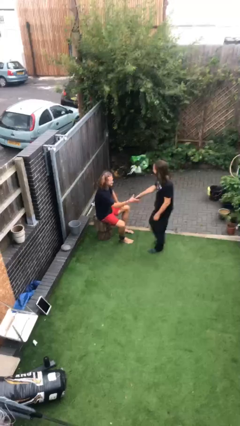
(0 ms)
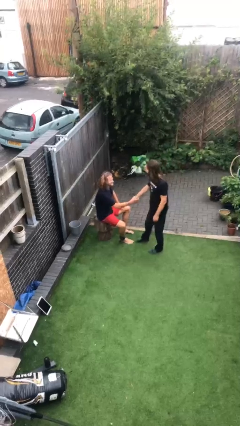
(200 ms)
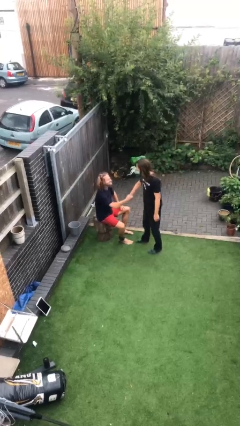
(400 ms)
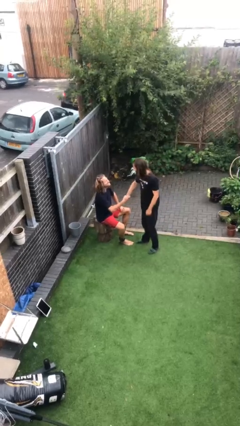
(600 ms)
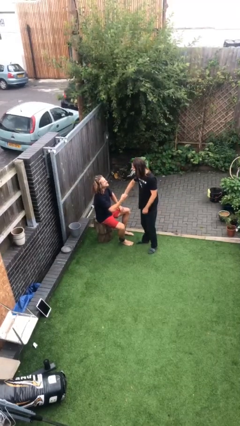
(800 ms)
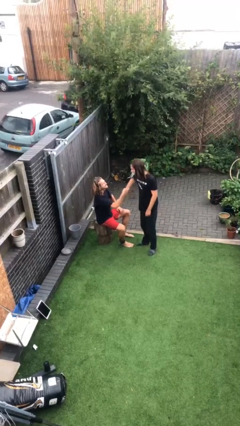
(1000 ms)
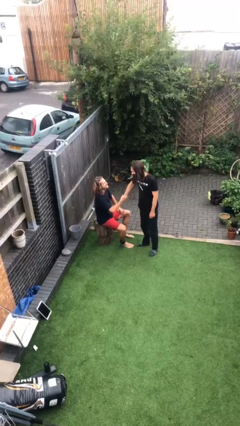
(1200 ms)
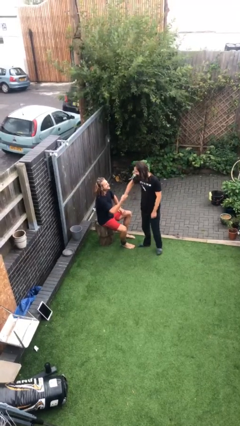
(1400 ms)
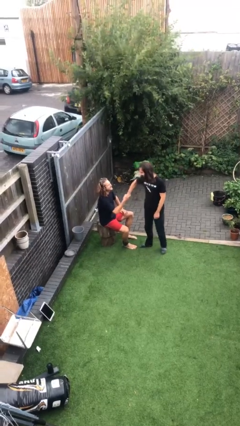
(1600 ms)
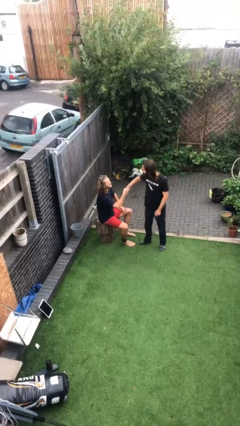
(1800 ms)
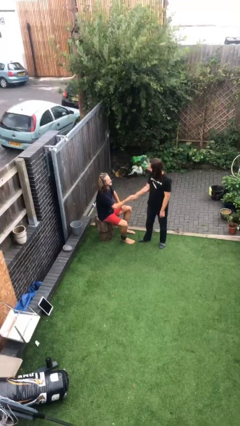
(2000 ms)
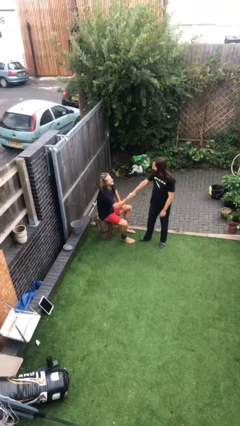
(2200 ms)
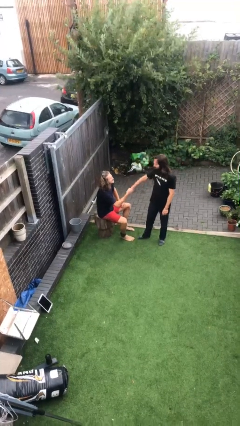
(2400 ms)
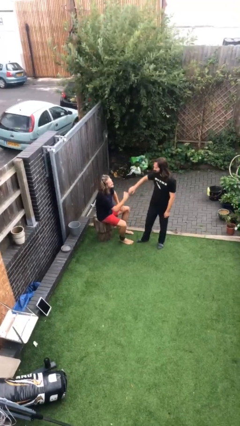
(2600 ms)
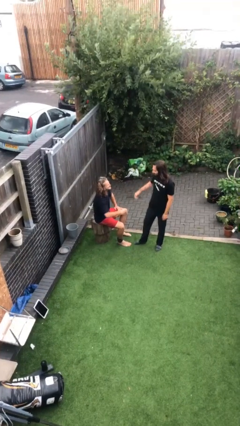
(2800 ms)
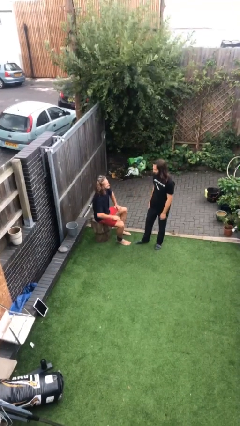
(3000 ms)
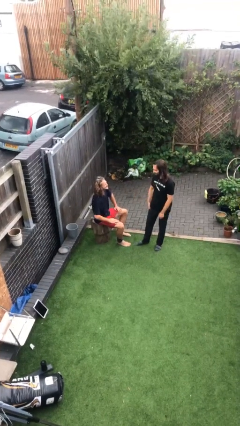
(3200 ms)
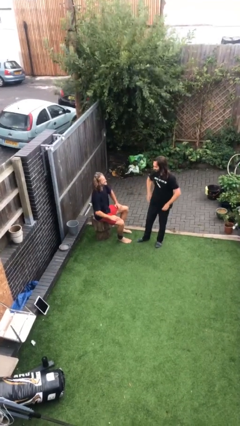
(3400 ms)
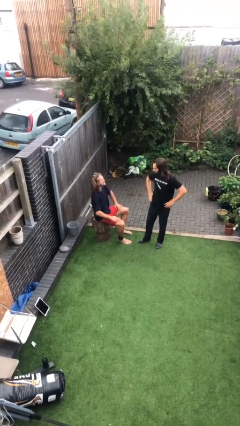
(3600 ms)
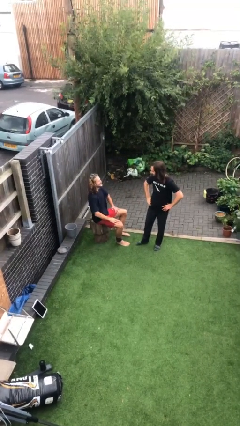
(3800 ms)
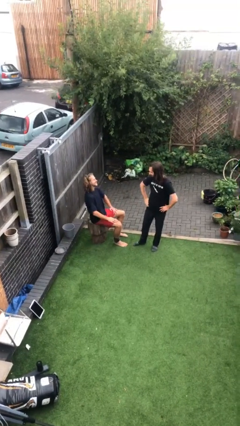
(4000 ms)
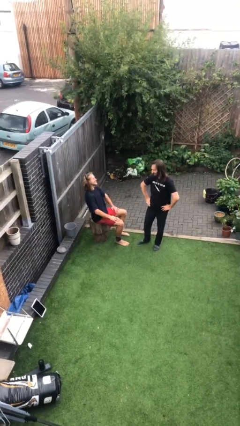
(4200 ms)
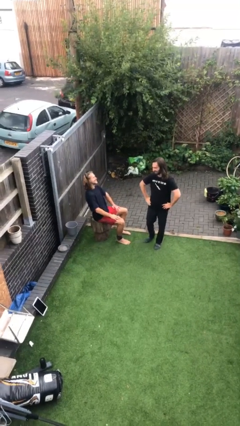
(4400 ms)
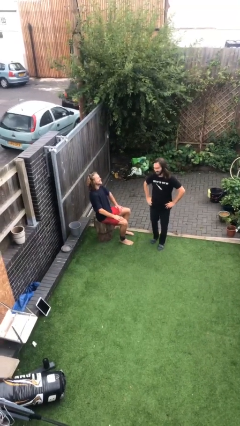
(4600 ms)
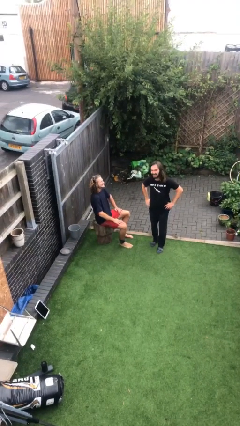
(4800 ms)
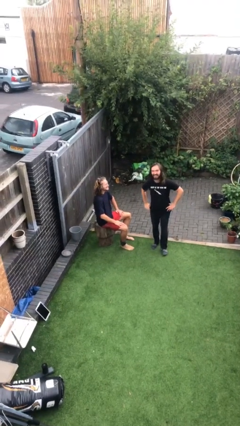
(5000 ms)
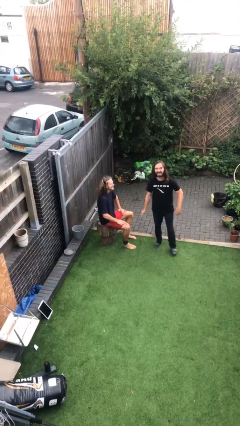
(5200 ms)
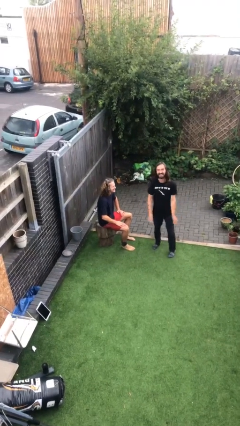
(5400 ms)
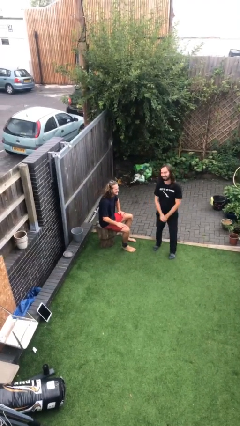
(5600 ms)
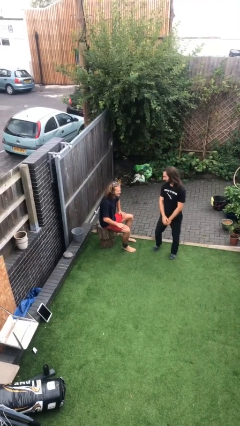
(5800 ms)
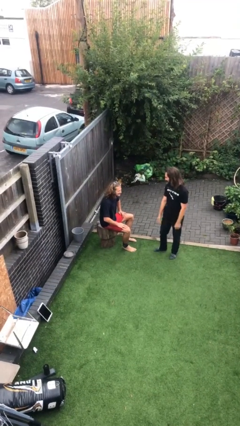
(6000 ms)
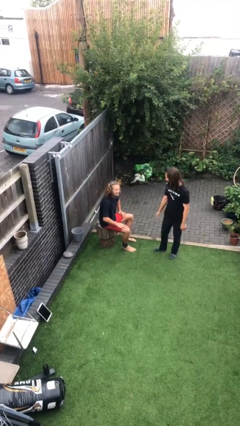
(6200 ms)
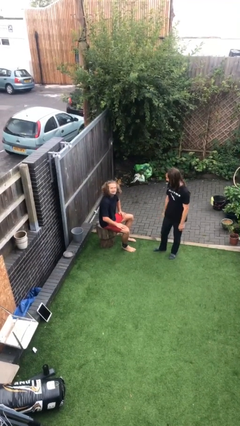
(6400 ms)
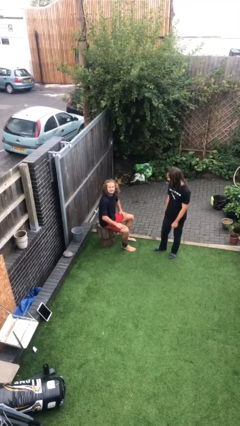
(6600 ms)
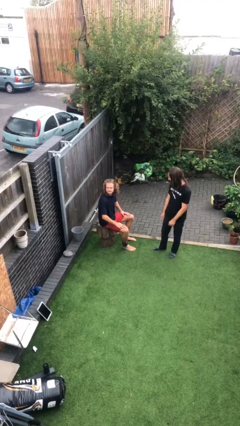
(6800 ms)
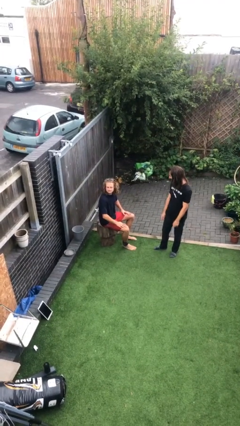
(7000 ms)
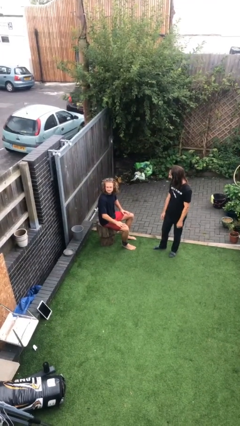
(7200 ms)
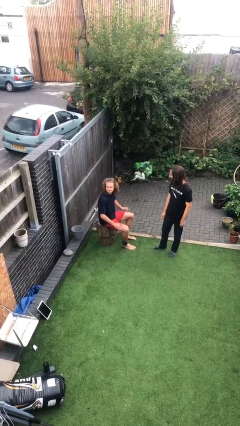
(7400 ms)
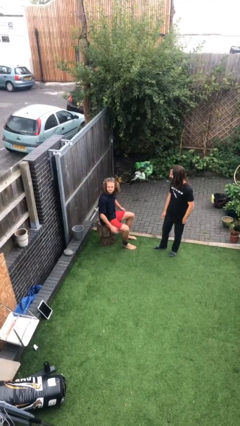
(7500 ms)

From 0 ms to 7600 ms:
person shakes hand

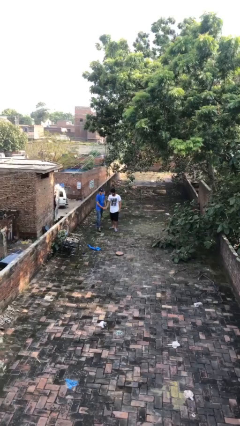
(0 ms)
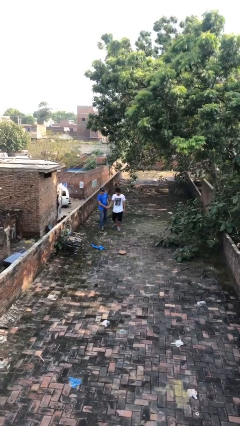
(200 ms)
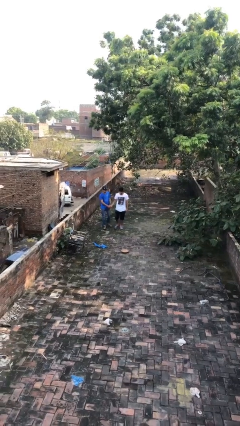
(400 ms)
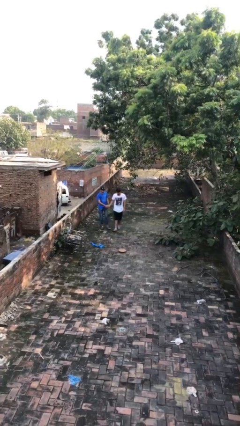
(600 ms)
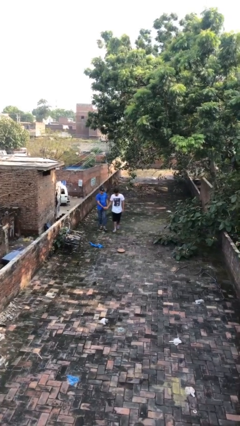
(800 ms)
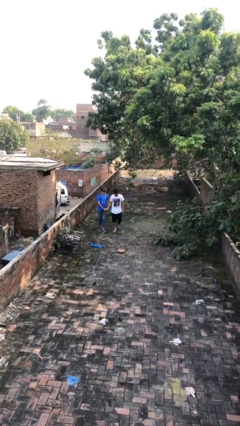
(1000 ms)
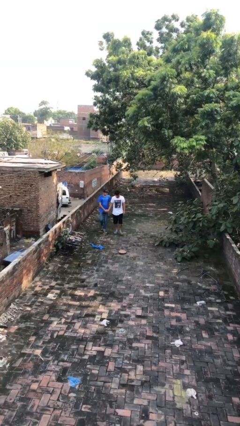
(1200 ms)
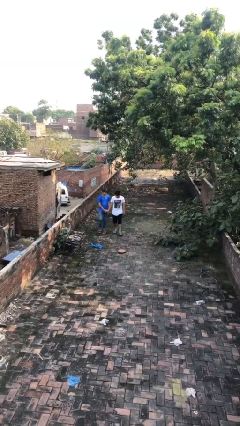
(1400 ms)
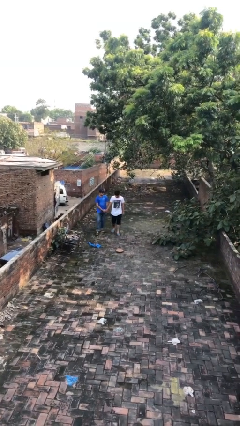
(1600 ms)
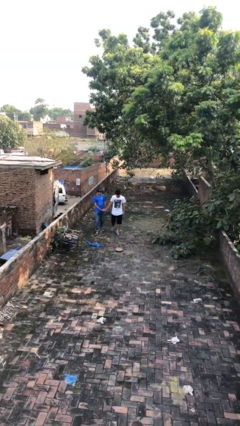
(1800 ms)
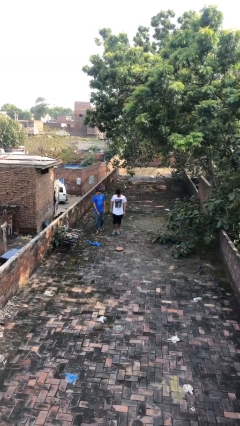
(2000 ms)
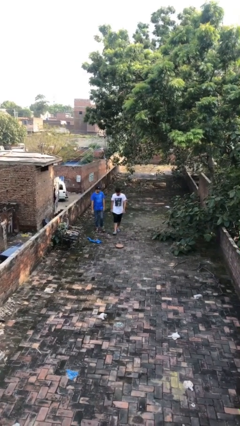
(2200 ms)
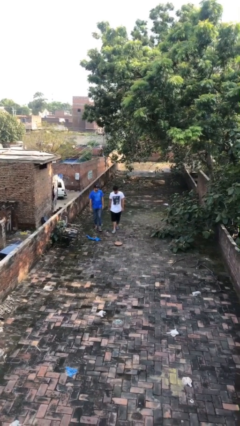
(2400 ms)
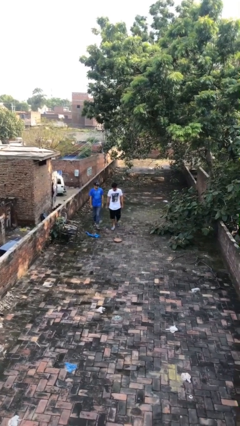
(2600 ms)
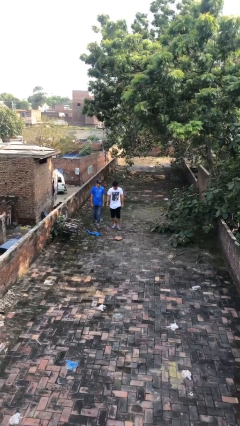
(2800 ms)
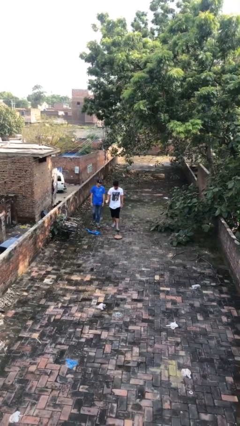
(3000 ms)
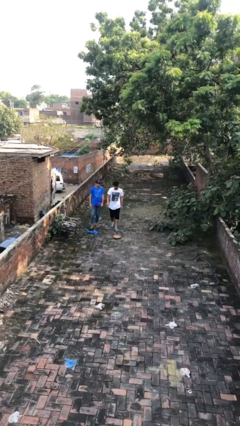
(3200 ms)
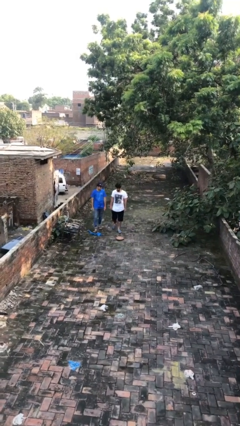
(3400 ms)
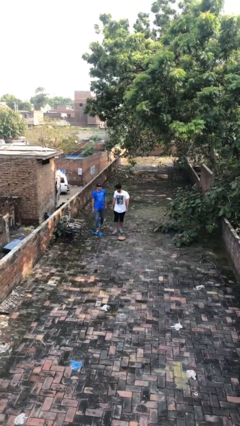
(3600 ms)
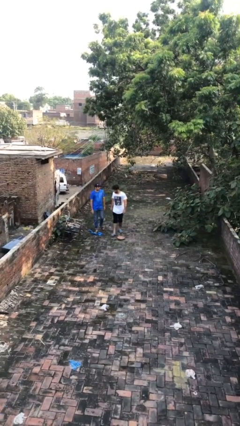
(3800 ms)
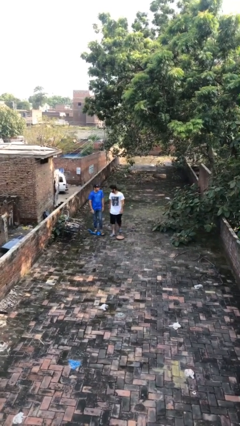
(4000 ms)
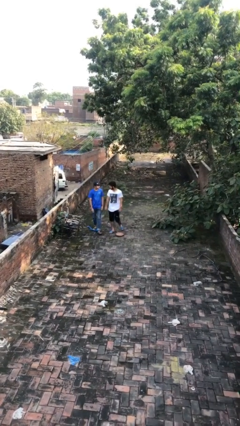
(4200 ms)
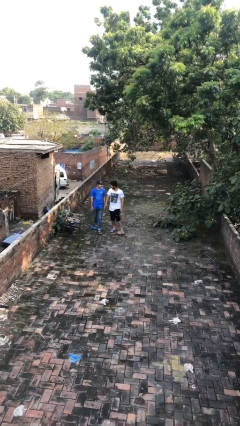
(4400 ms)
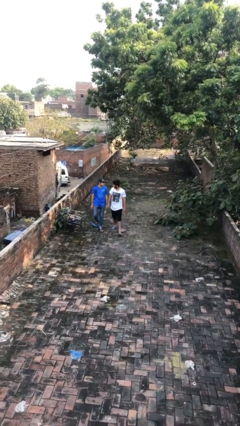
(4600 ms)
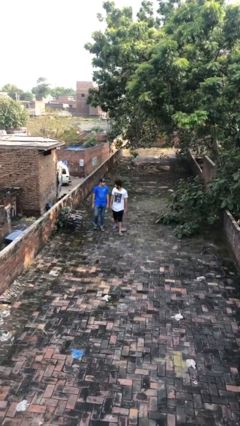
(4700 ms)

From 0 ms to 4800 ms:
person talks to person

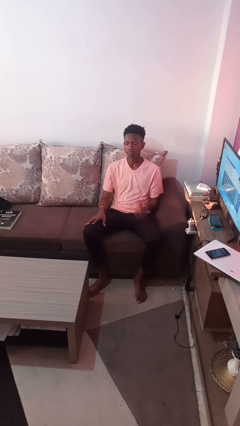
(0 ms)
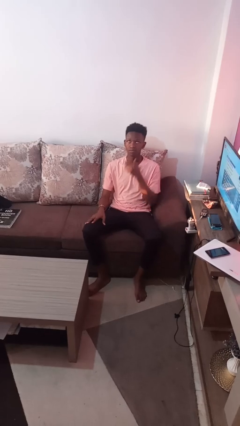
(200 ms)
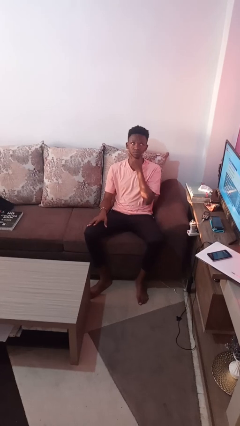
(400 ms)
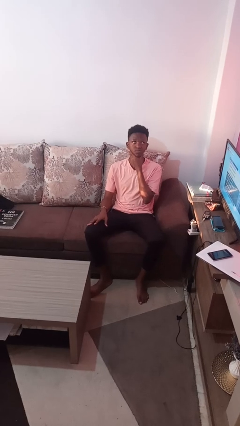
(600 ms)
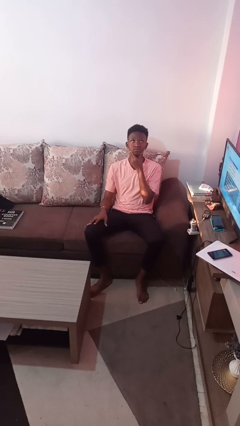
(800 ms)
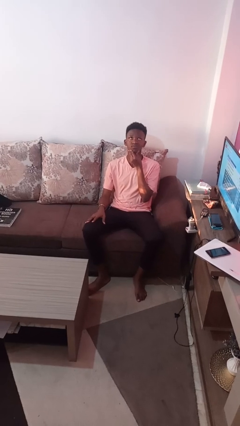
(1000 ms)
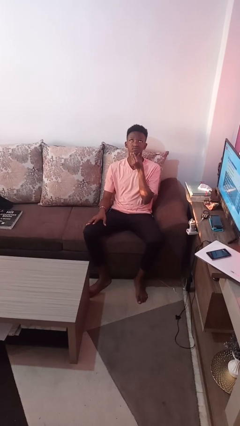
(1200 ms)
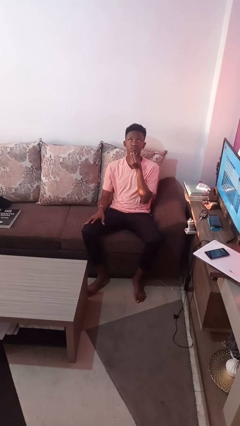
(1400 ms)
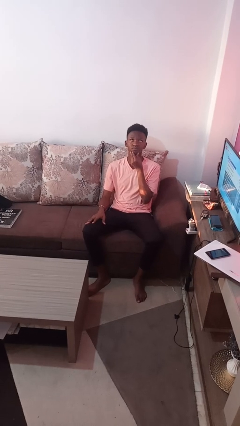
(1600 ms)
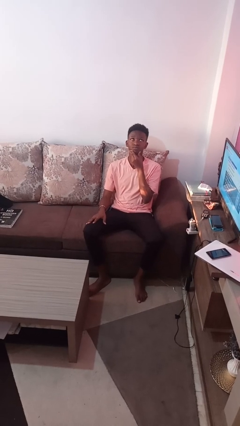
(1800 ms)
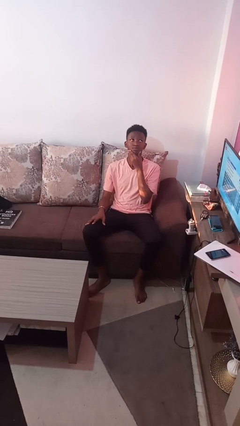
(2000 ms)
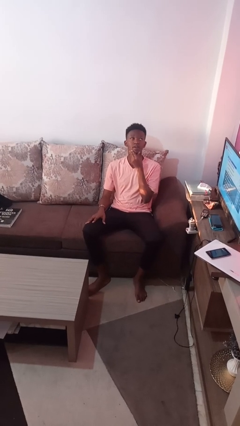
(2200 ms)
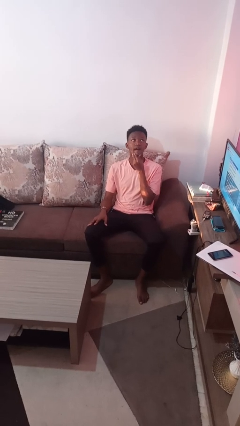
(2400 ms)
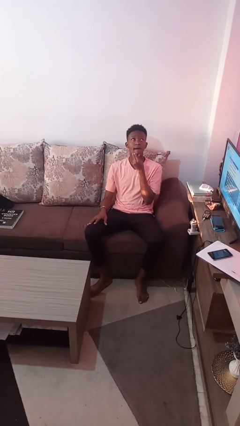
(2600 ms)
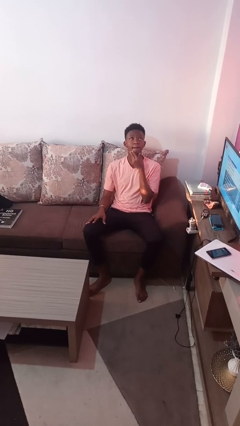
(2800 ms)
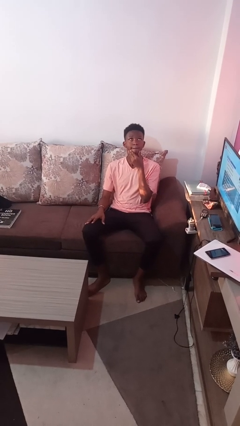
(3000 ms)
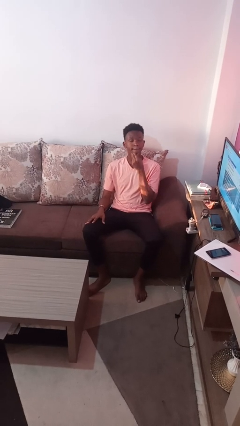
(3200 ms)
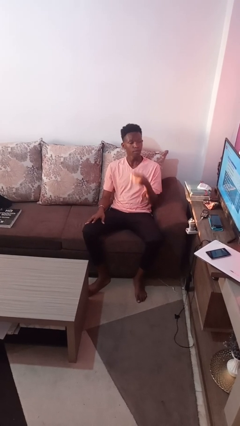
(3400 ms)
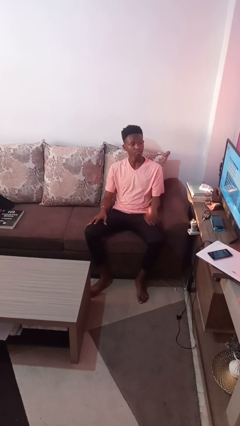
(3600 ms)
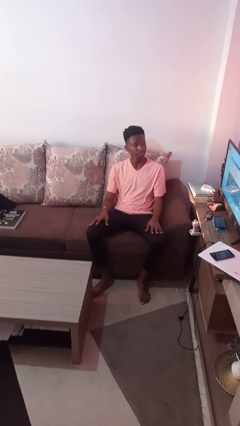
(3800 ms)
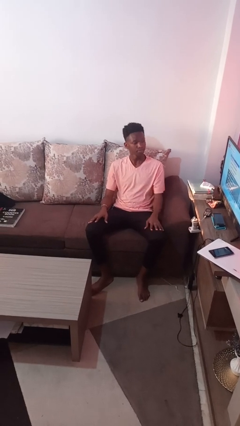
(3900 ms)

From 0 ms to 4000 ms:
person strokes chin

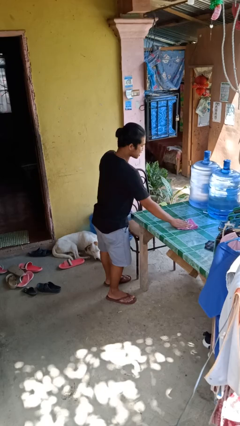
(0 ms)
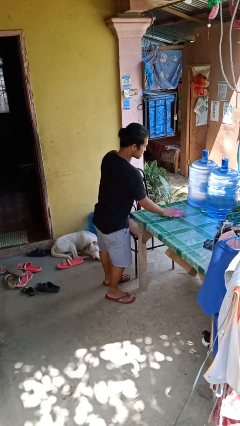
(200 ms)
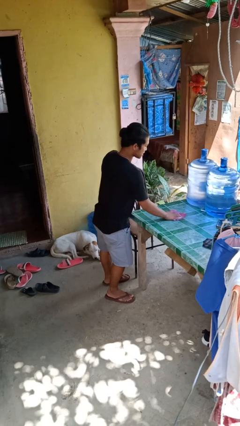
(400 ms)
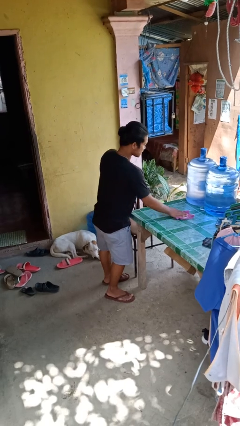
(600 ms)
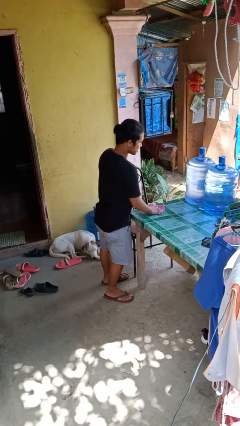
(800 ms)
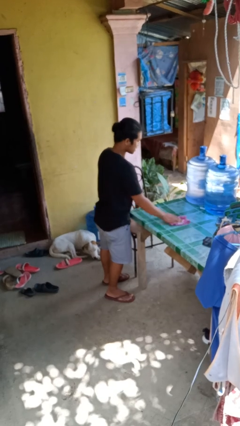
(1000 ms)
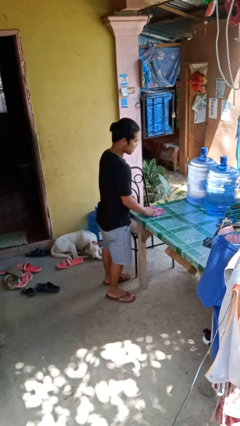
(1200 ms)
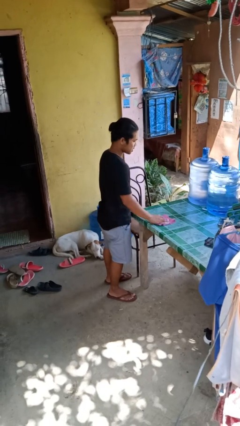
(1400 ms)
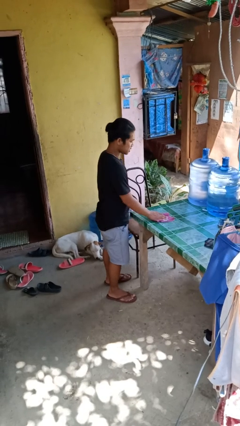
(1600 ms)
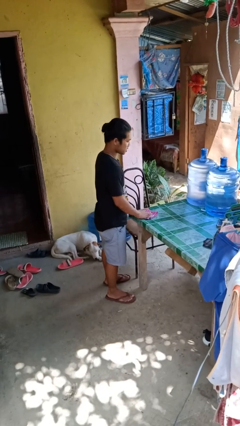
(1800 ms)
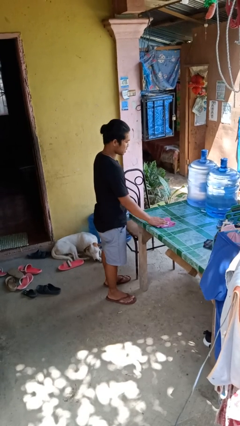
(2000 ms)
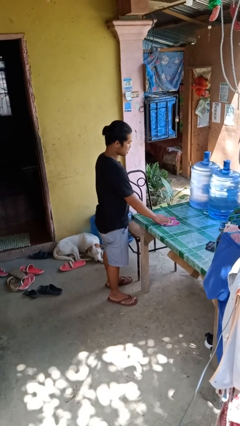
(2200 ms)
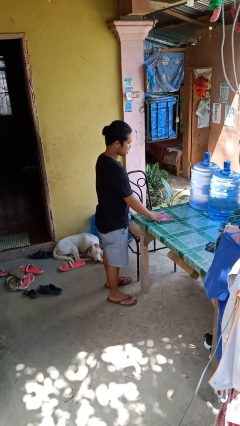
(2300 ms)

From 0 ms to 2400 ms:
person cleans table with rag
